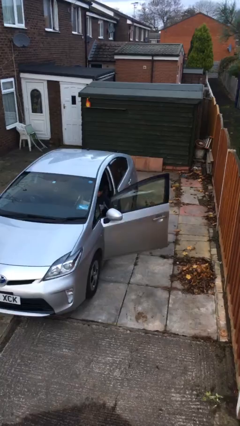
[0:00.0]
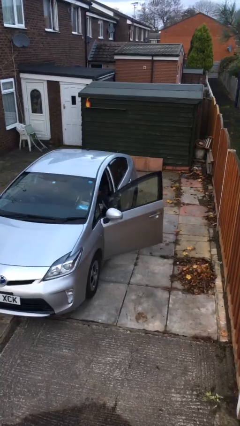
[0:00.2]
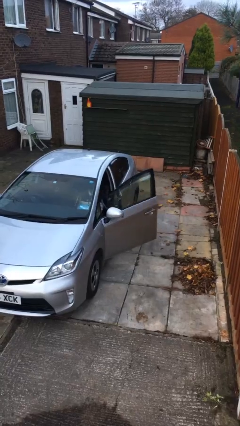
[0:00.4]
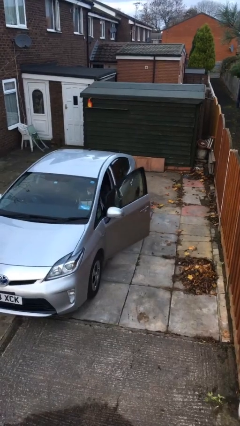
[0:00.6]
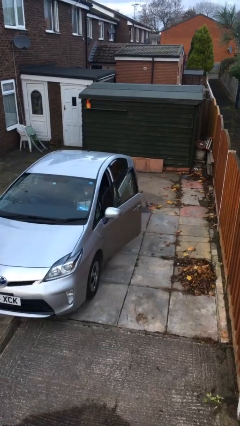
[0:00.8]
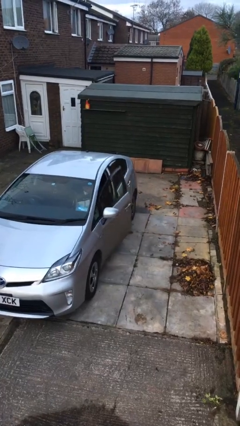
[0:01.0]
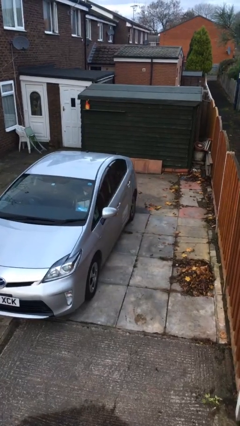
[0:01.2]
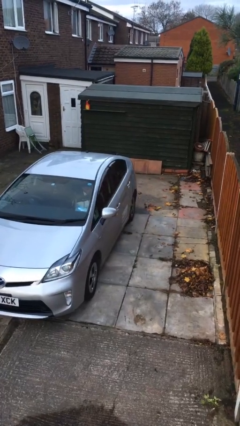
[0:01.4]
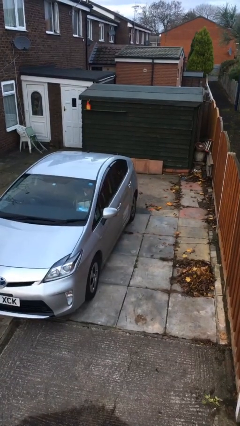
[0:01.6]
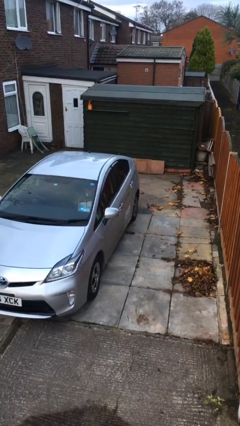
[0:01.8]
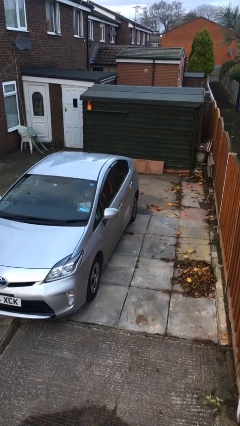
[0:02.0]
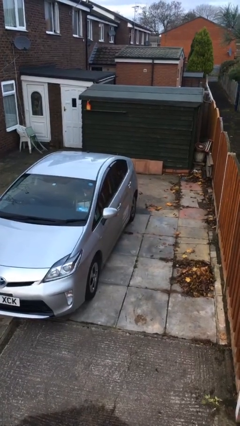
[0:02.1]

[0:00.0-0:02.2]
person closes car door

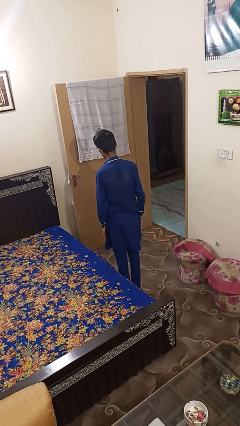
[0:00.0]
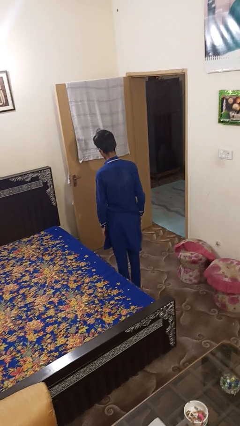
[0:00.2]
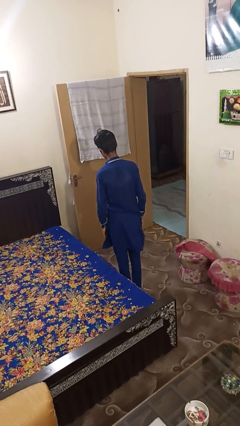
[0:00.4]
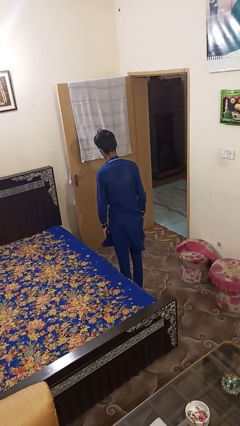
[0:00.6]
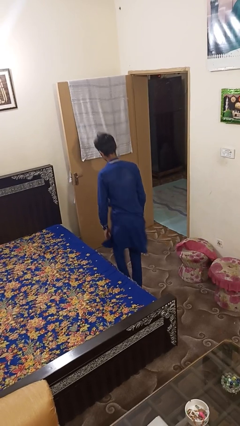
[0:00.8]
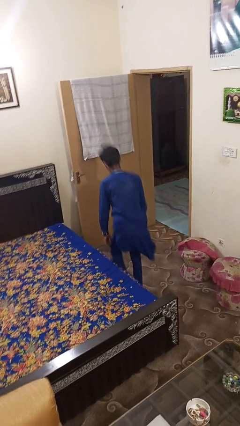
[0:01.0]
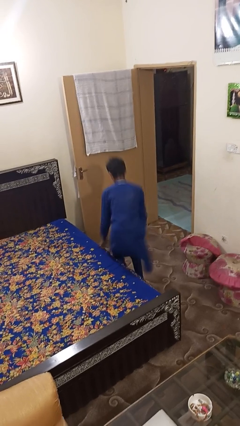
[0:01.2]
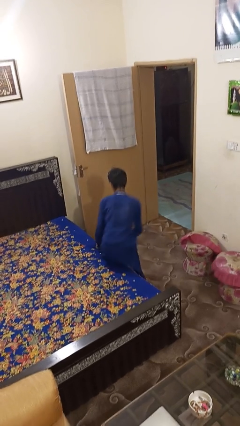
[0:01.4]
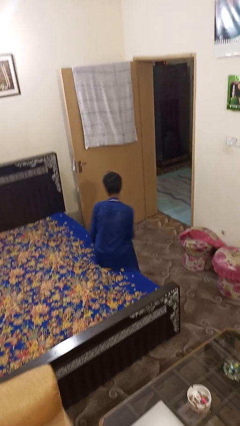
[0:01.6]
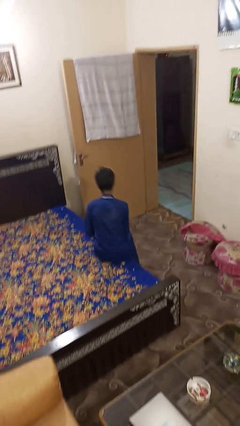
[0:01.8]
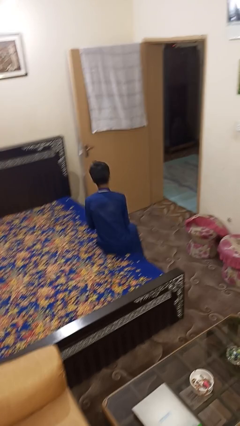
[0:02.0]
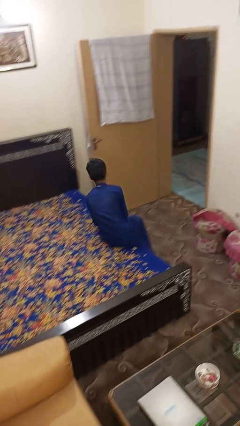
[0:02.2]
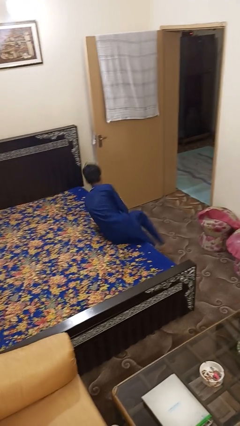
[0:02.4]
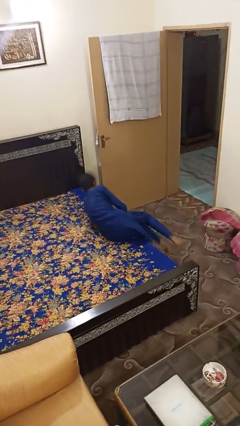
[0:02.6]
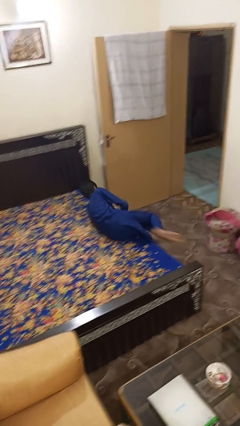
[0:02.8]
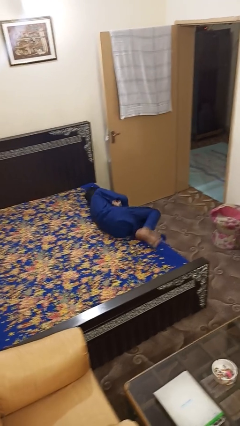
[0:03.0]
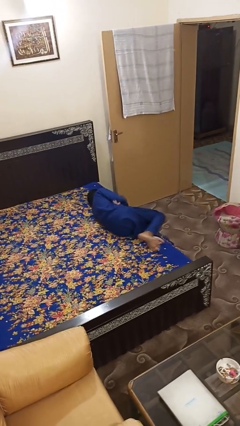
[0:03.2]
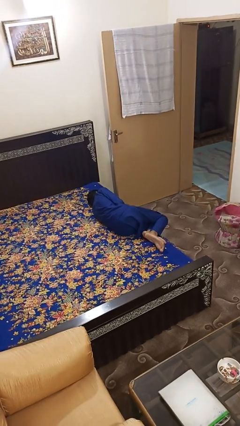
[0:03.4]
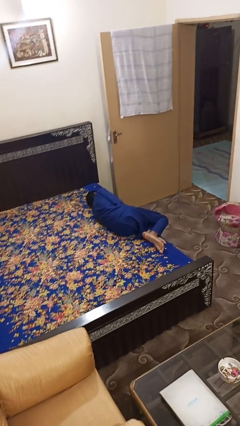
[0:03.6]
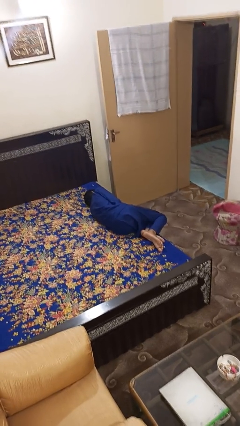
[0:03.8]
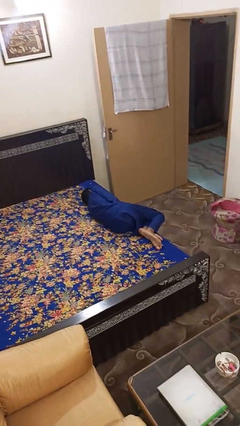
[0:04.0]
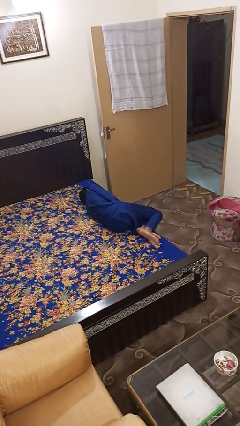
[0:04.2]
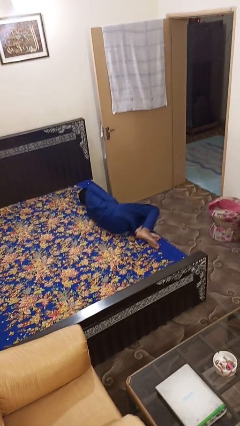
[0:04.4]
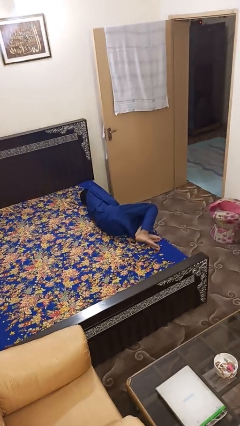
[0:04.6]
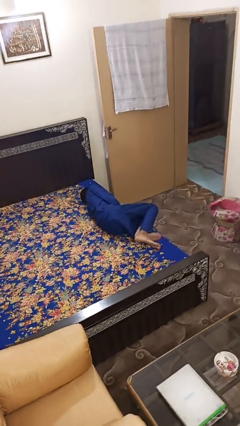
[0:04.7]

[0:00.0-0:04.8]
person lies down on bed

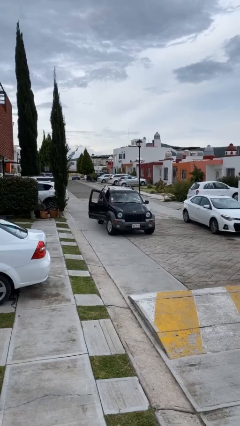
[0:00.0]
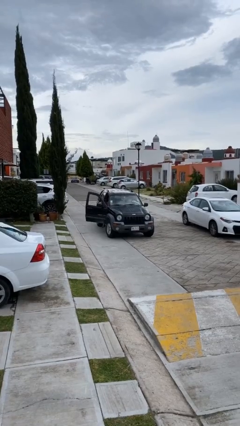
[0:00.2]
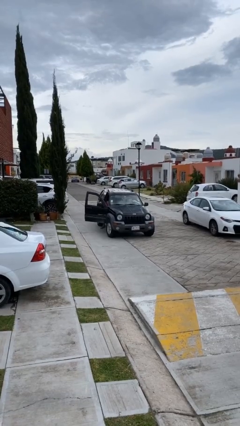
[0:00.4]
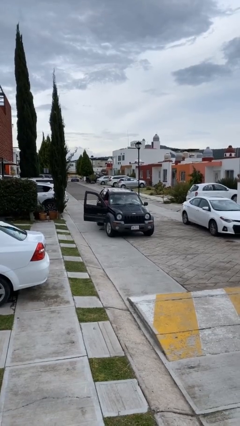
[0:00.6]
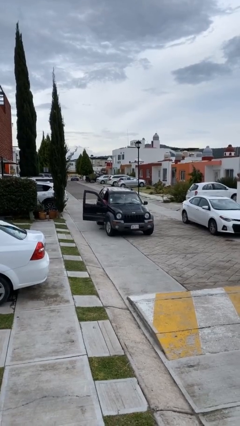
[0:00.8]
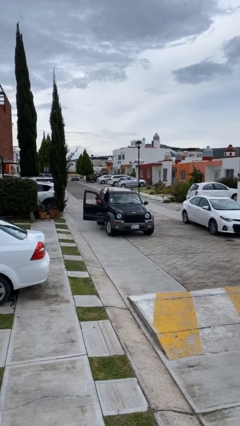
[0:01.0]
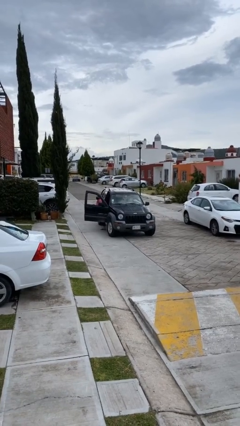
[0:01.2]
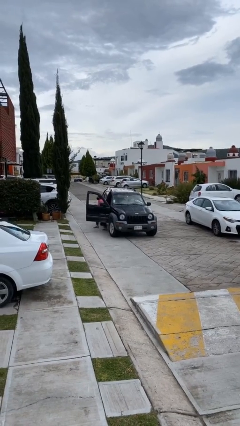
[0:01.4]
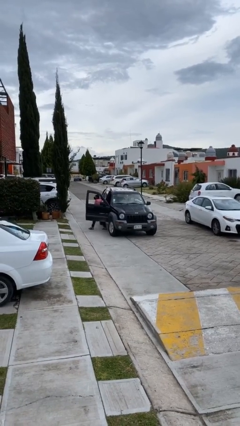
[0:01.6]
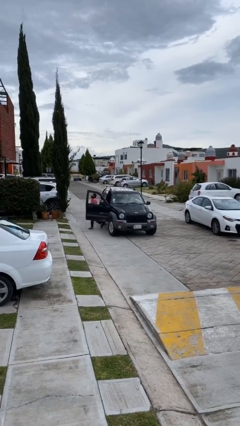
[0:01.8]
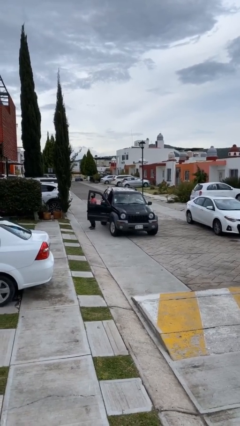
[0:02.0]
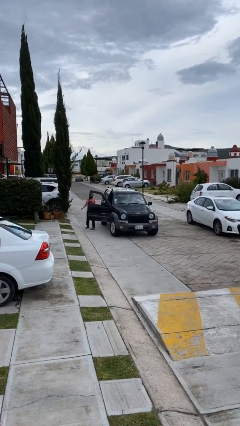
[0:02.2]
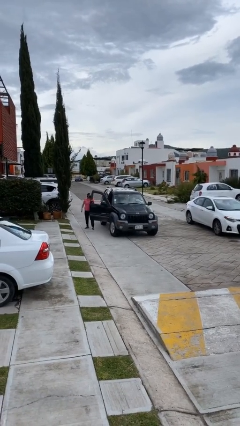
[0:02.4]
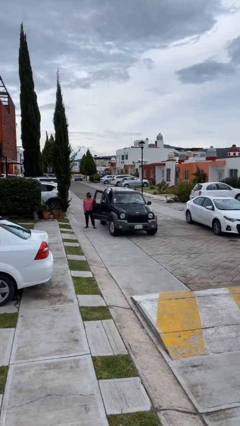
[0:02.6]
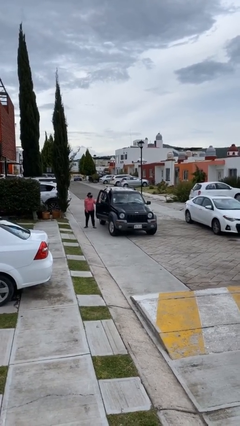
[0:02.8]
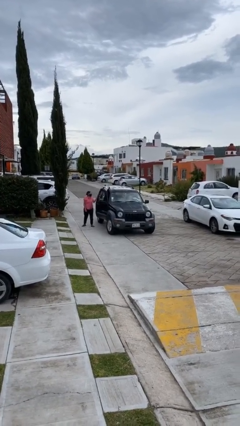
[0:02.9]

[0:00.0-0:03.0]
car drops off person

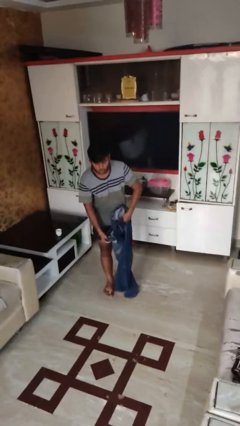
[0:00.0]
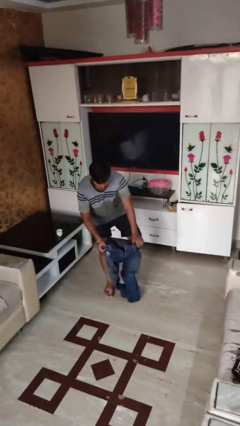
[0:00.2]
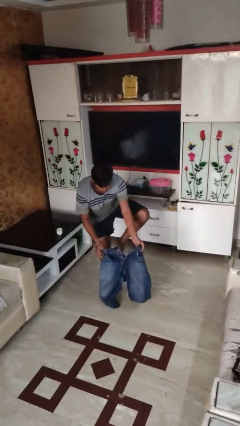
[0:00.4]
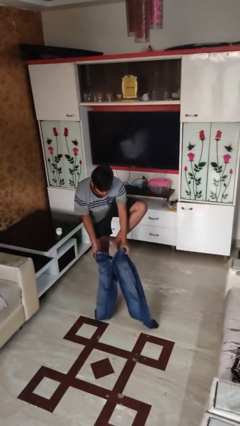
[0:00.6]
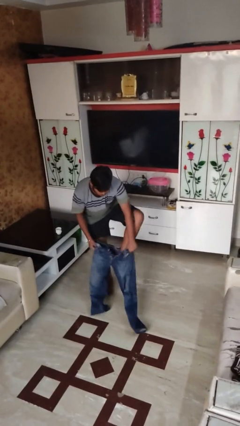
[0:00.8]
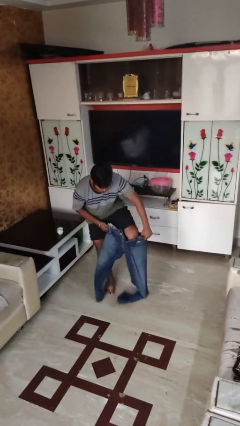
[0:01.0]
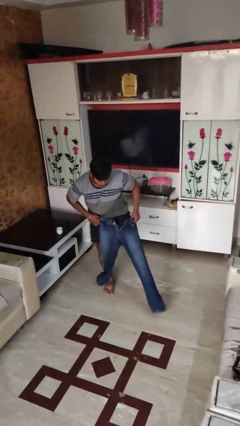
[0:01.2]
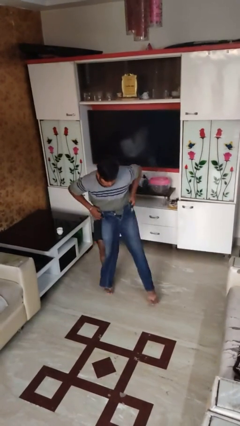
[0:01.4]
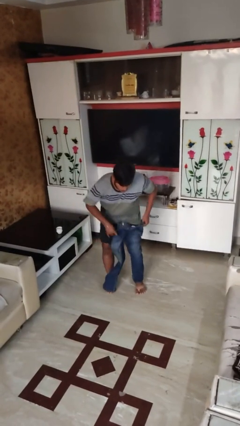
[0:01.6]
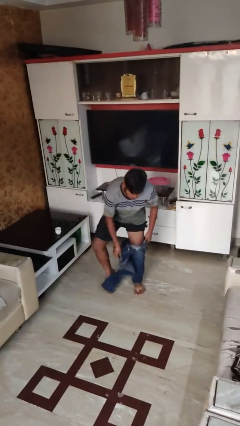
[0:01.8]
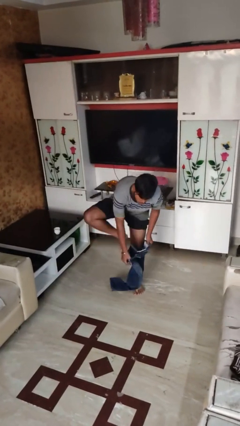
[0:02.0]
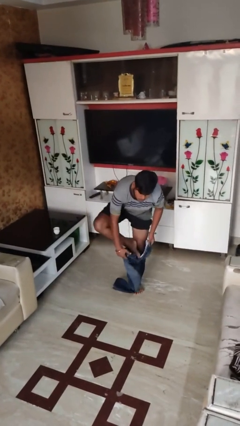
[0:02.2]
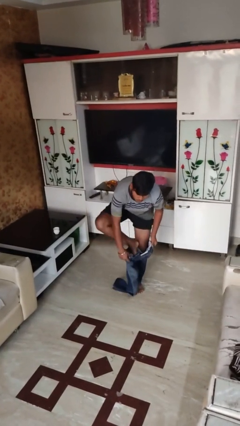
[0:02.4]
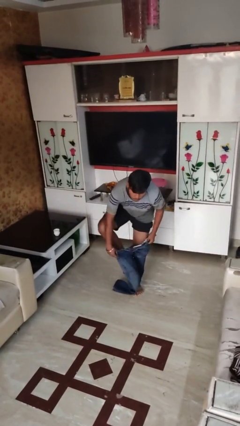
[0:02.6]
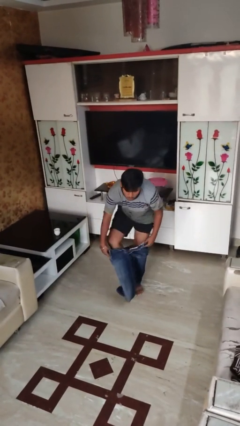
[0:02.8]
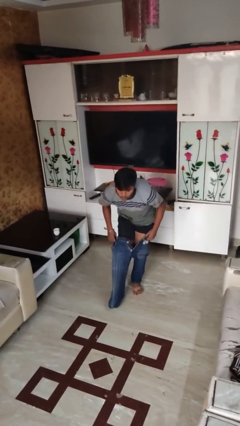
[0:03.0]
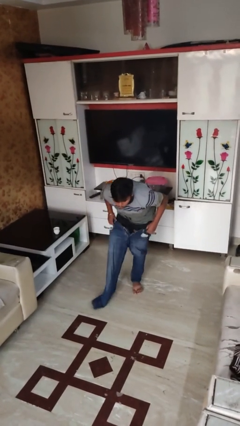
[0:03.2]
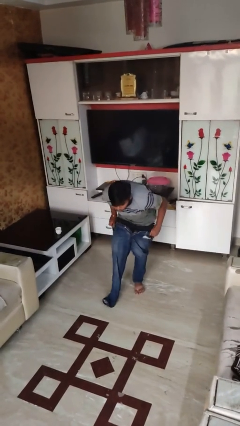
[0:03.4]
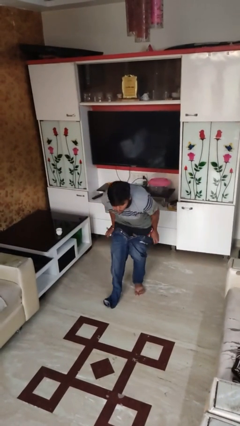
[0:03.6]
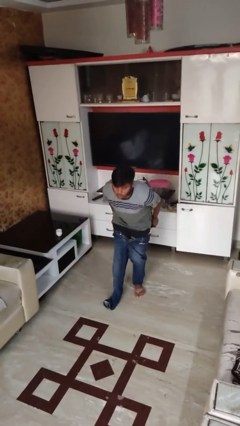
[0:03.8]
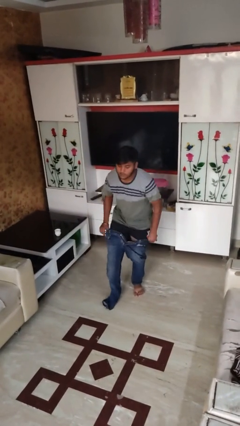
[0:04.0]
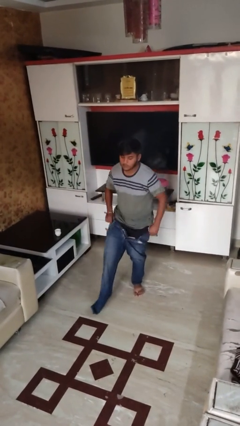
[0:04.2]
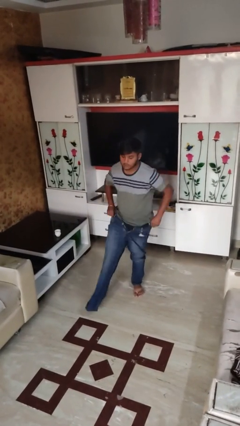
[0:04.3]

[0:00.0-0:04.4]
person puts on pants

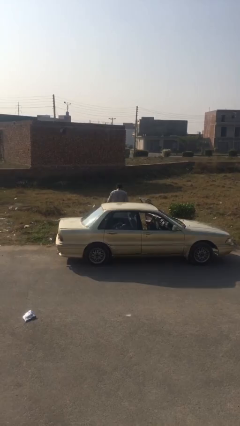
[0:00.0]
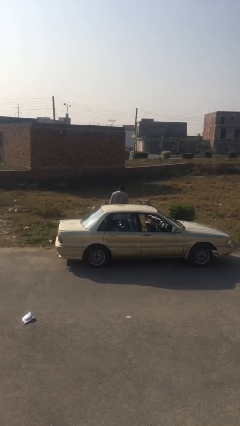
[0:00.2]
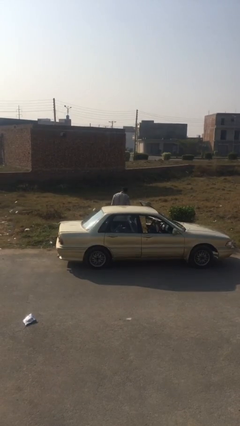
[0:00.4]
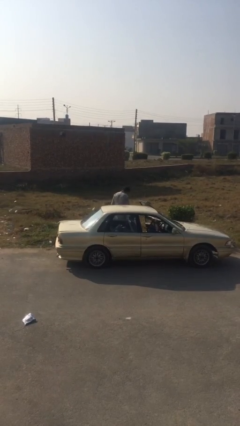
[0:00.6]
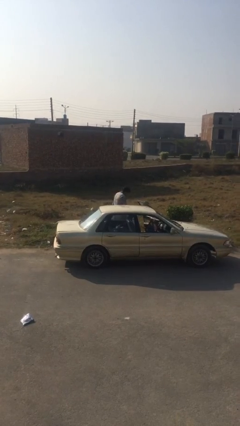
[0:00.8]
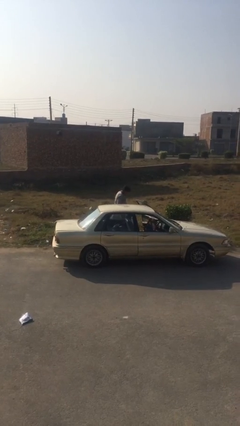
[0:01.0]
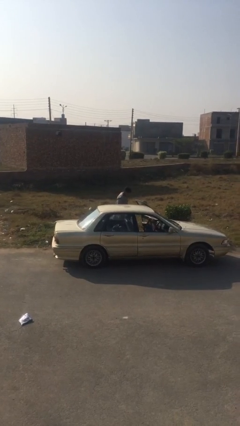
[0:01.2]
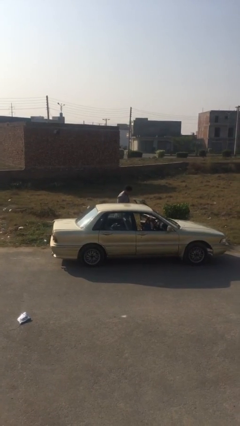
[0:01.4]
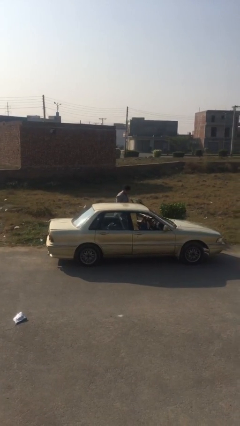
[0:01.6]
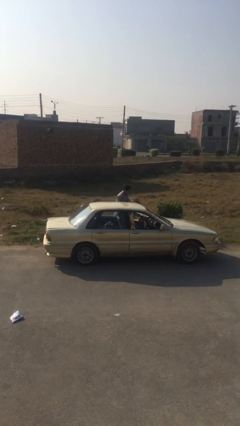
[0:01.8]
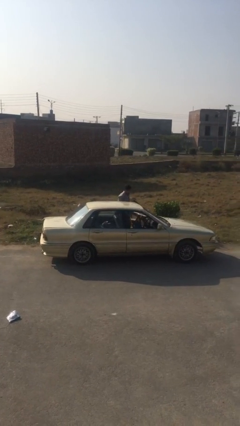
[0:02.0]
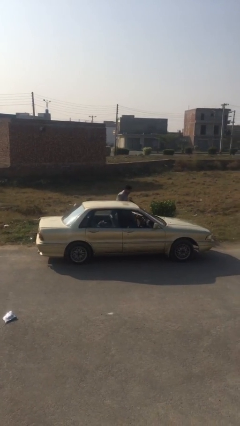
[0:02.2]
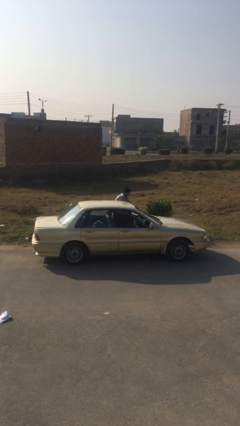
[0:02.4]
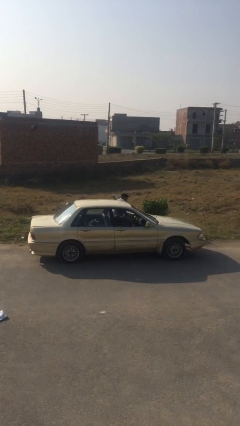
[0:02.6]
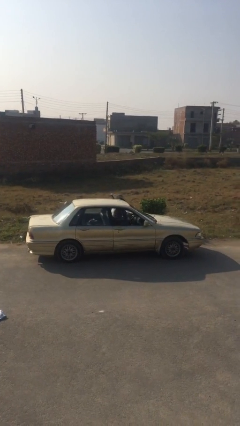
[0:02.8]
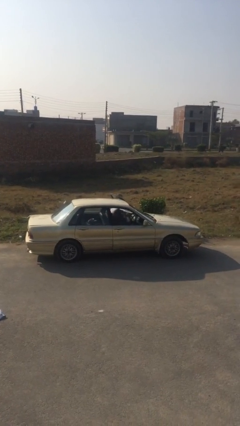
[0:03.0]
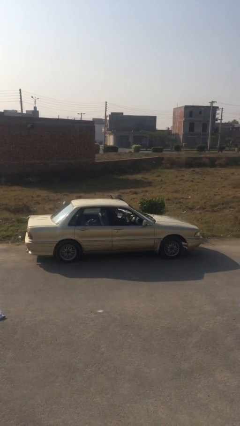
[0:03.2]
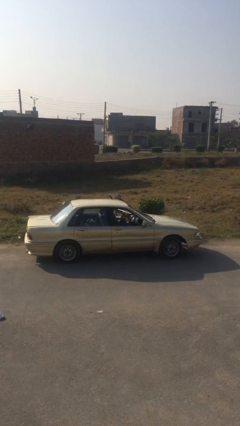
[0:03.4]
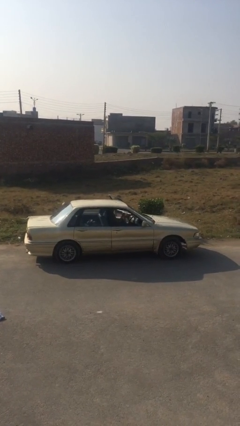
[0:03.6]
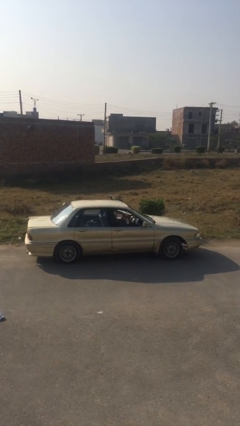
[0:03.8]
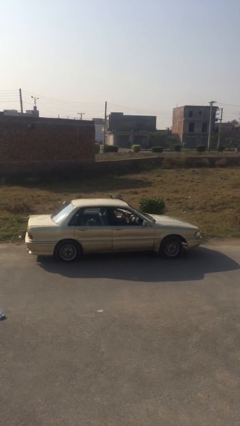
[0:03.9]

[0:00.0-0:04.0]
person enters car
